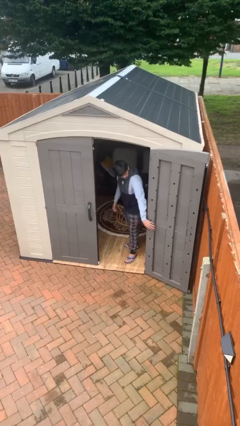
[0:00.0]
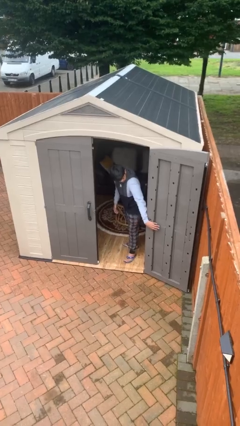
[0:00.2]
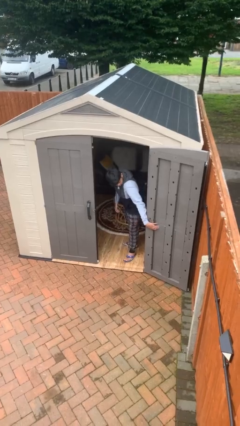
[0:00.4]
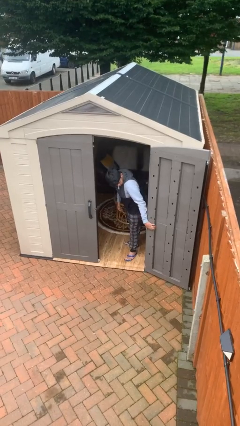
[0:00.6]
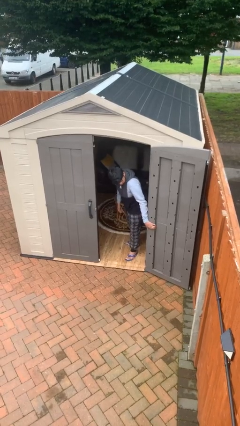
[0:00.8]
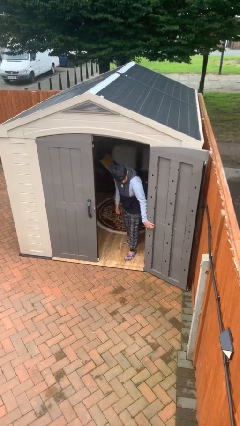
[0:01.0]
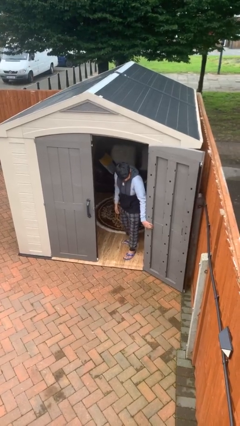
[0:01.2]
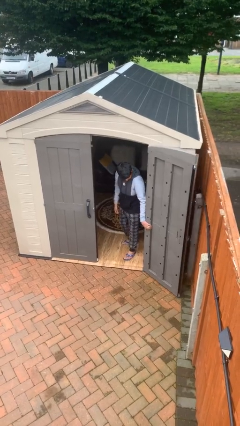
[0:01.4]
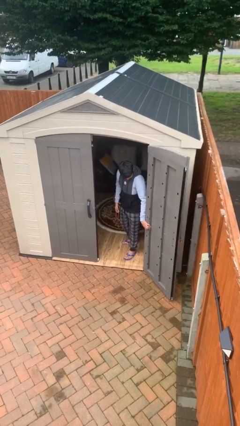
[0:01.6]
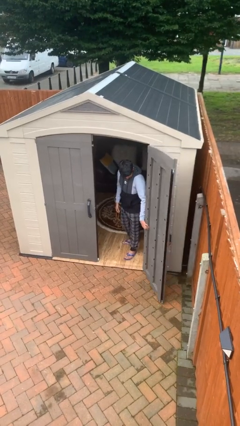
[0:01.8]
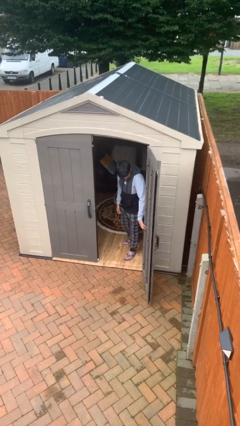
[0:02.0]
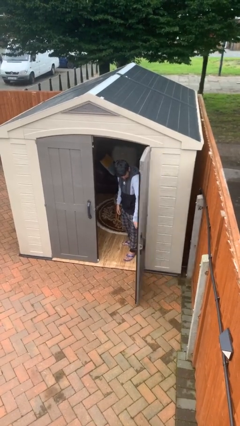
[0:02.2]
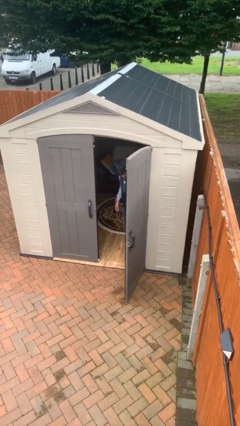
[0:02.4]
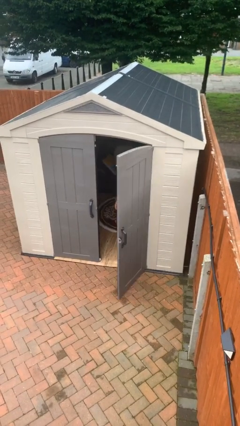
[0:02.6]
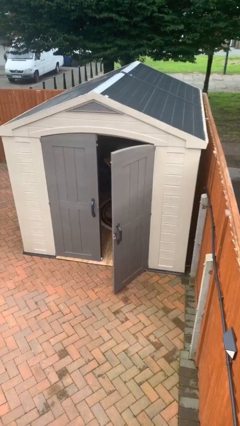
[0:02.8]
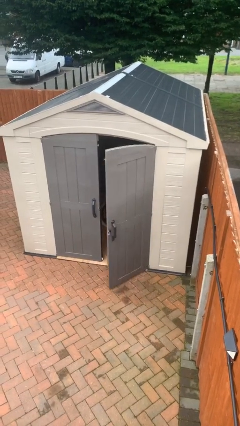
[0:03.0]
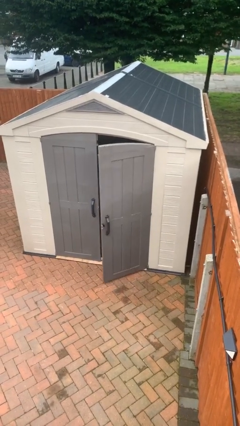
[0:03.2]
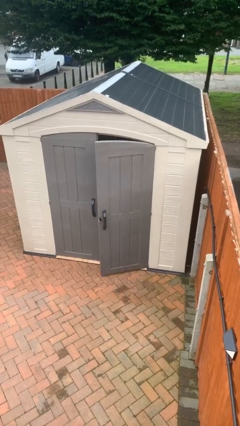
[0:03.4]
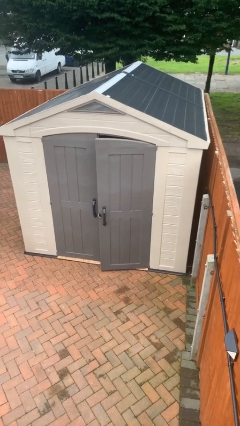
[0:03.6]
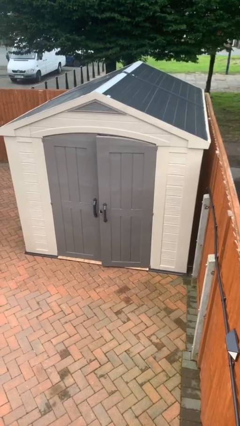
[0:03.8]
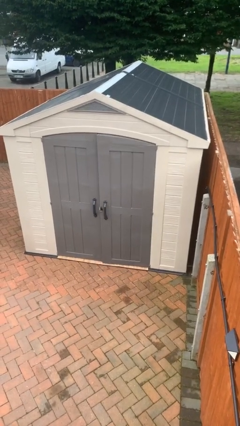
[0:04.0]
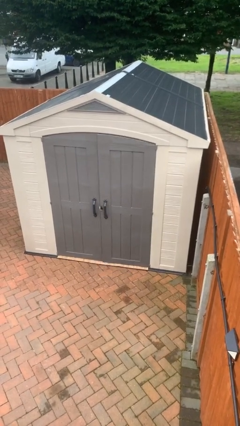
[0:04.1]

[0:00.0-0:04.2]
person closes facility door

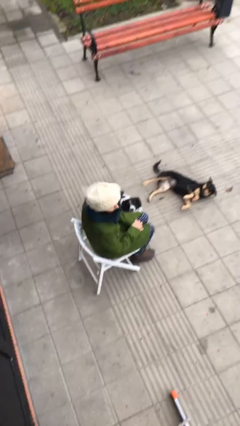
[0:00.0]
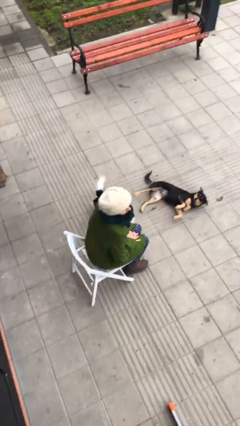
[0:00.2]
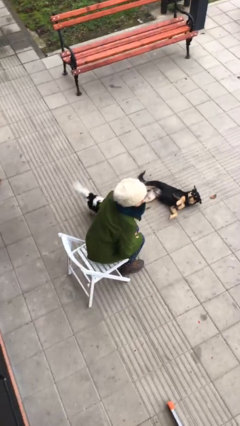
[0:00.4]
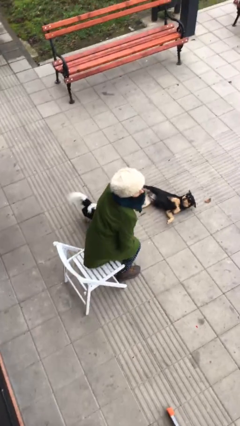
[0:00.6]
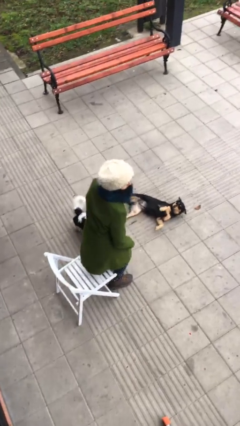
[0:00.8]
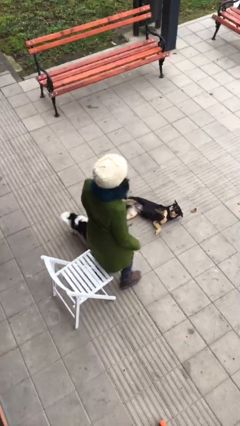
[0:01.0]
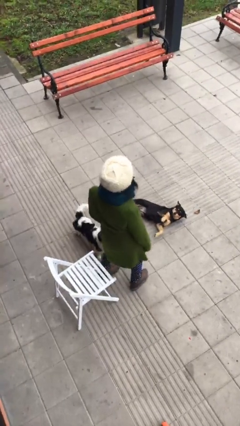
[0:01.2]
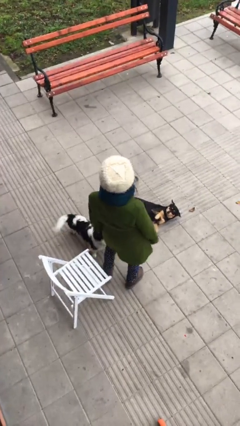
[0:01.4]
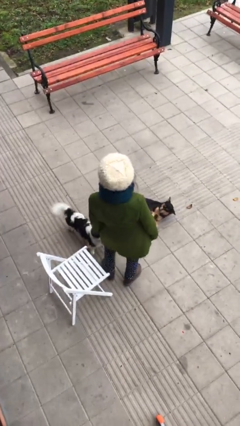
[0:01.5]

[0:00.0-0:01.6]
person stands up

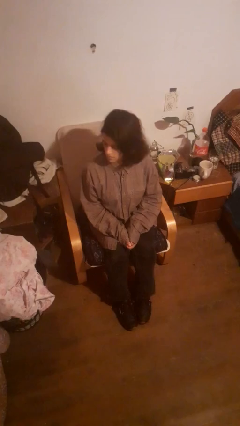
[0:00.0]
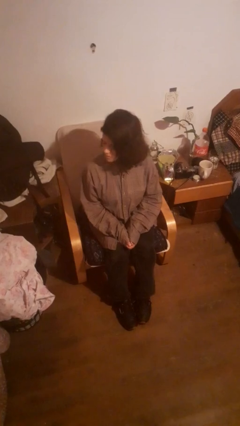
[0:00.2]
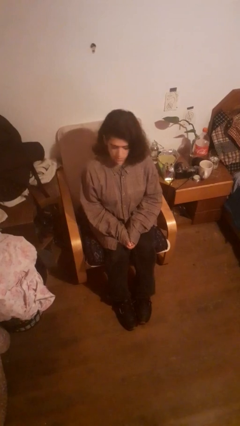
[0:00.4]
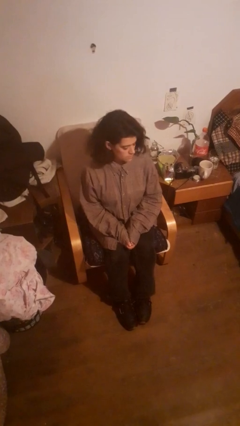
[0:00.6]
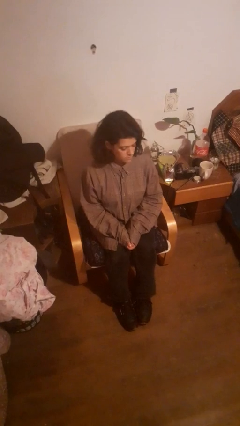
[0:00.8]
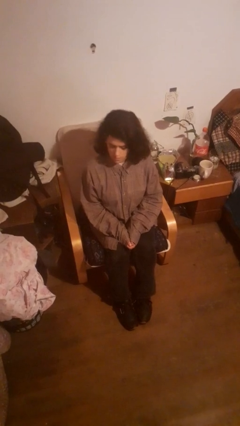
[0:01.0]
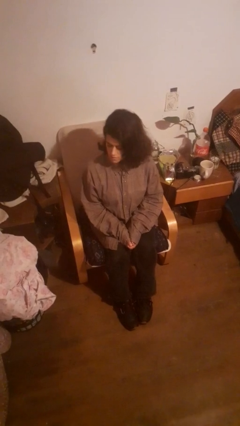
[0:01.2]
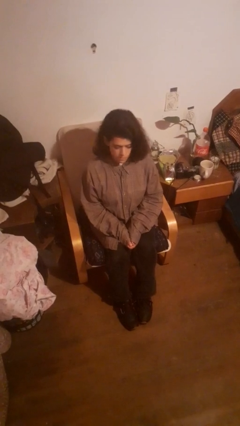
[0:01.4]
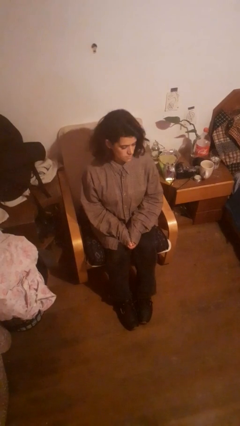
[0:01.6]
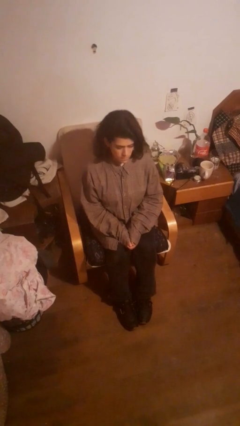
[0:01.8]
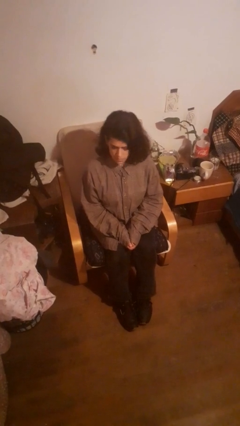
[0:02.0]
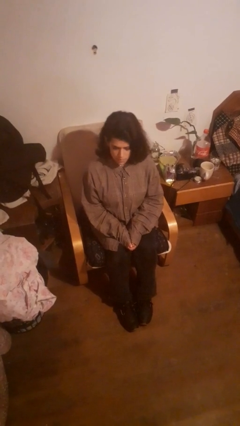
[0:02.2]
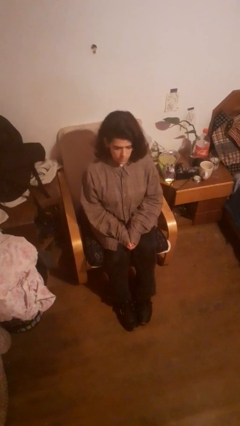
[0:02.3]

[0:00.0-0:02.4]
person shakes head

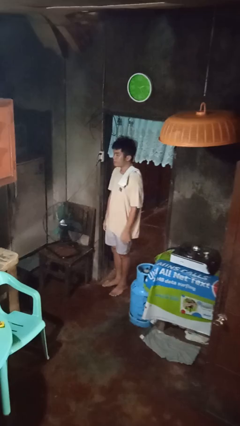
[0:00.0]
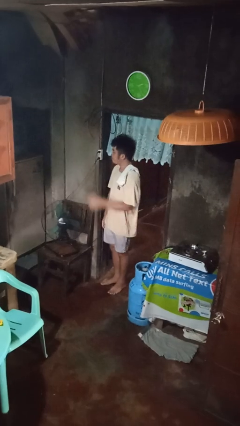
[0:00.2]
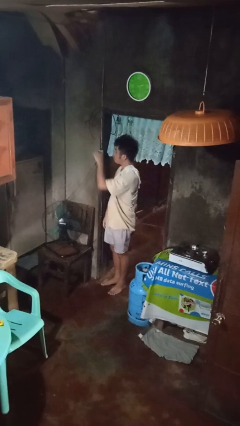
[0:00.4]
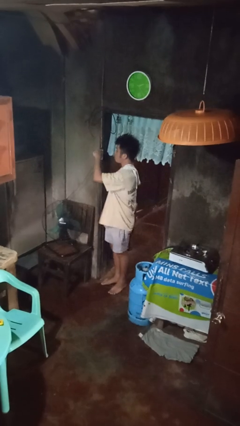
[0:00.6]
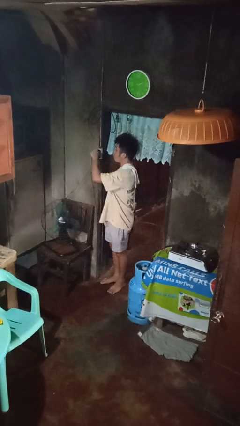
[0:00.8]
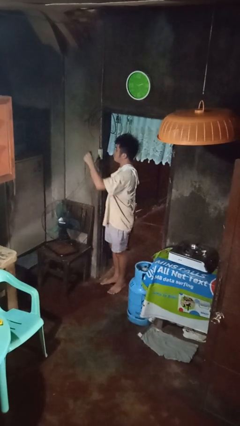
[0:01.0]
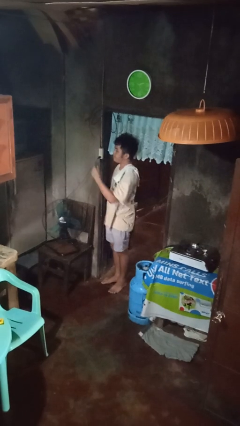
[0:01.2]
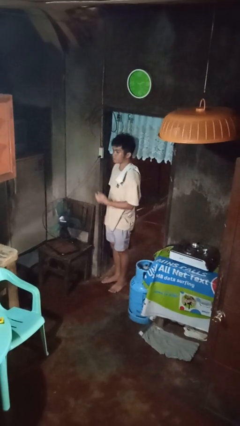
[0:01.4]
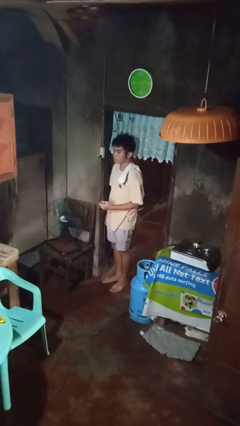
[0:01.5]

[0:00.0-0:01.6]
person unplugs from electrical socket

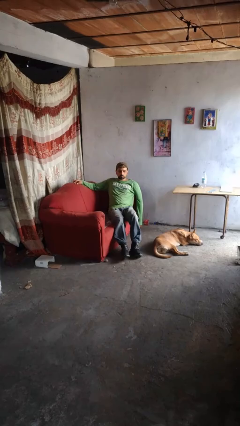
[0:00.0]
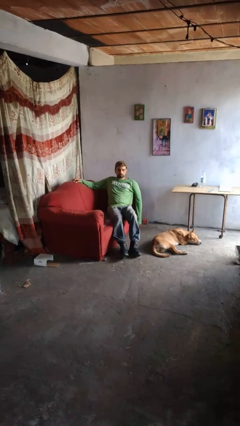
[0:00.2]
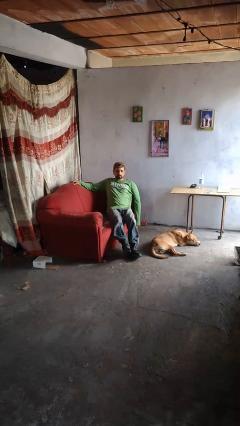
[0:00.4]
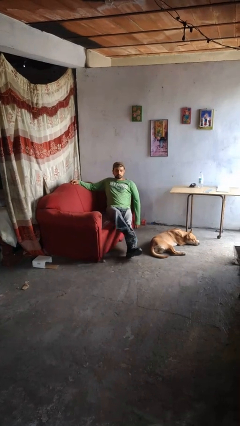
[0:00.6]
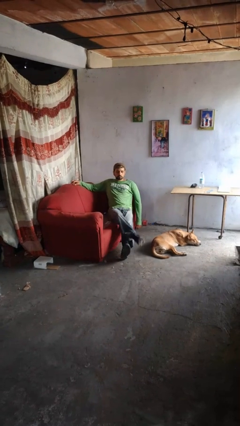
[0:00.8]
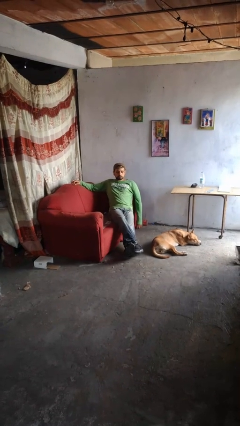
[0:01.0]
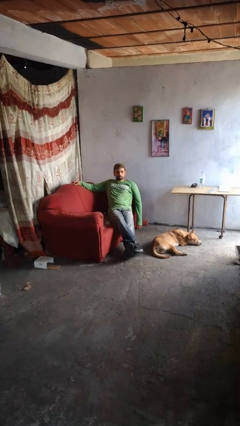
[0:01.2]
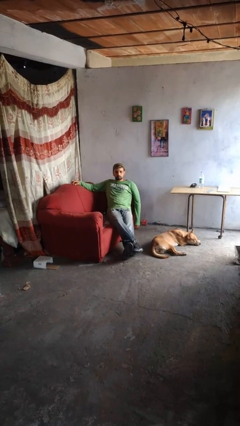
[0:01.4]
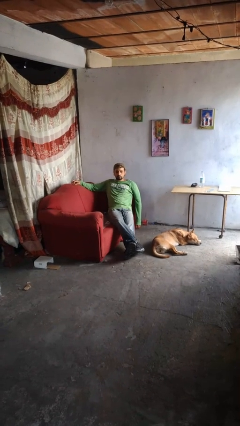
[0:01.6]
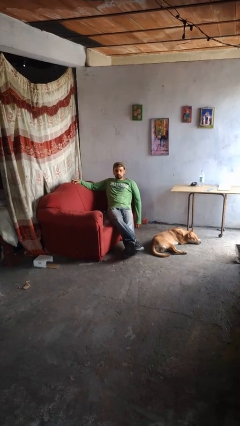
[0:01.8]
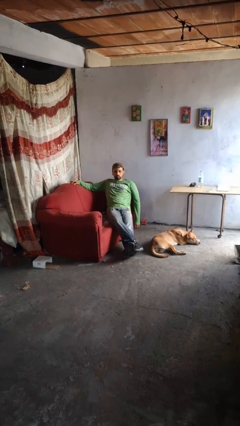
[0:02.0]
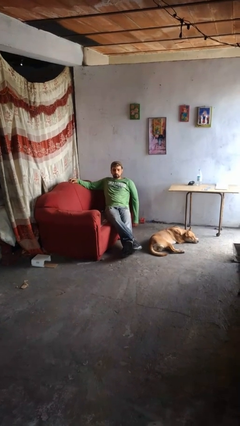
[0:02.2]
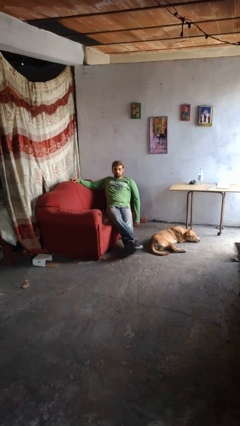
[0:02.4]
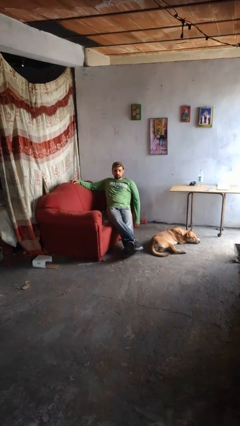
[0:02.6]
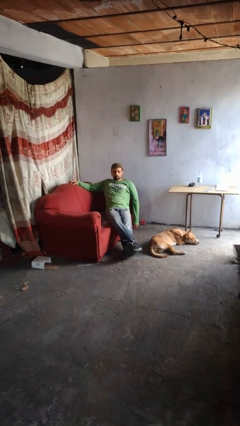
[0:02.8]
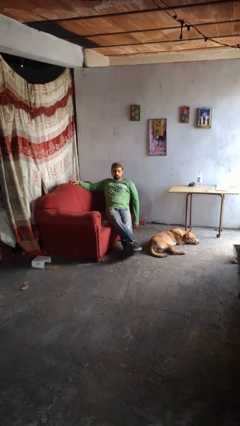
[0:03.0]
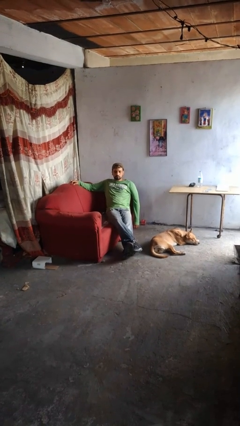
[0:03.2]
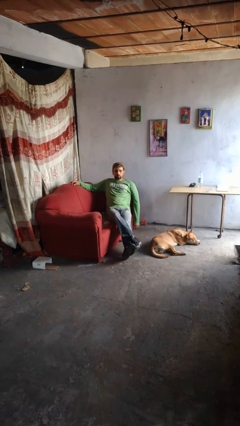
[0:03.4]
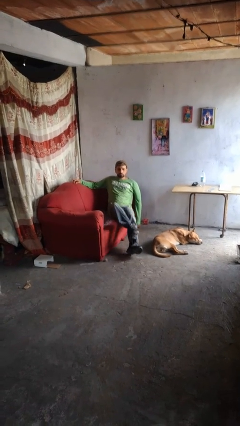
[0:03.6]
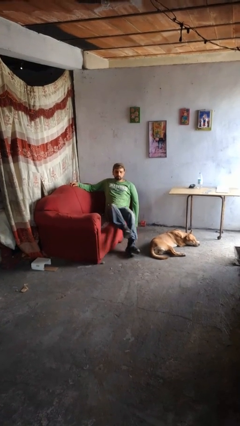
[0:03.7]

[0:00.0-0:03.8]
person crosses legs

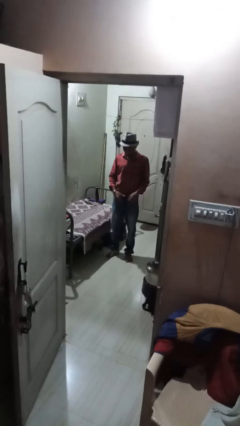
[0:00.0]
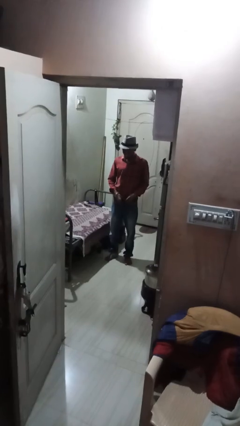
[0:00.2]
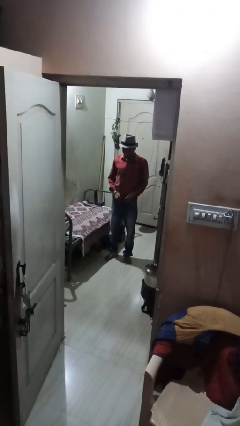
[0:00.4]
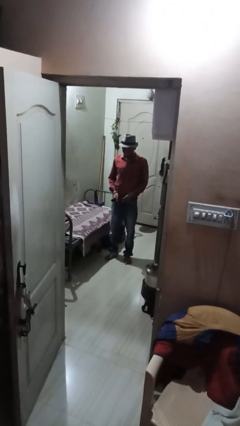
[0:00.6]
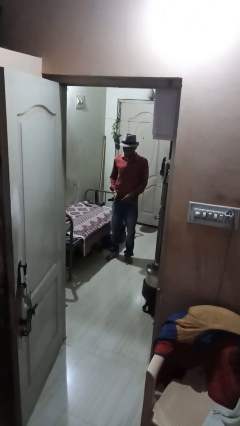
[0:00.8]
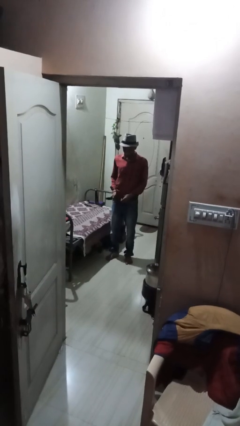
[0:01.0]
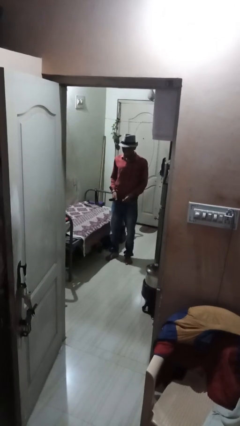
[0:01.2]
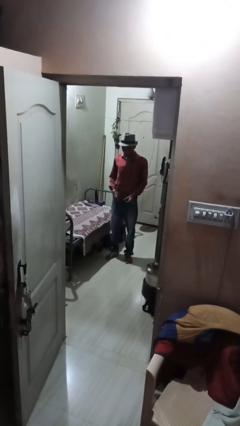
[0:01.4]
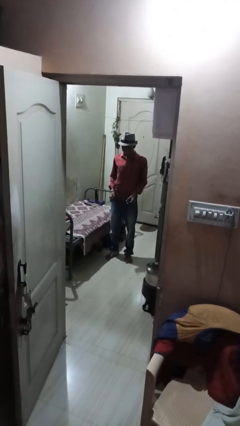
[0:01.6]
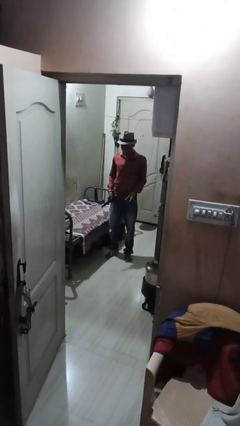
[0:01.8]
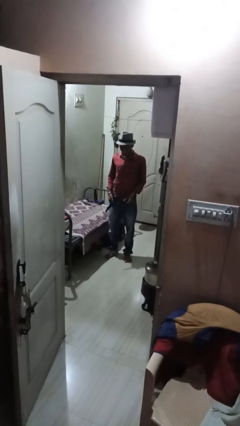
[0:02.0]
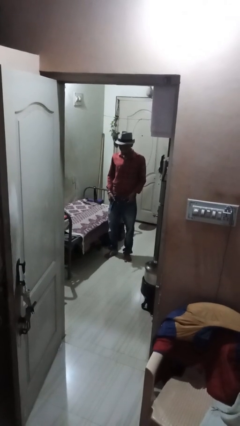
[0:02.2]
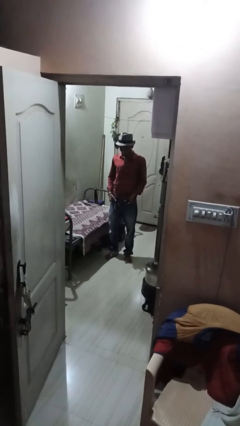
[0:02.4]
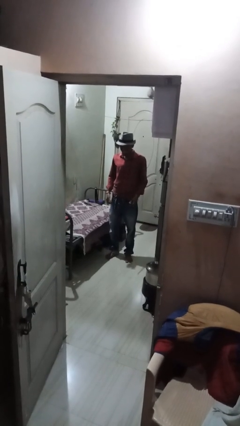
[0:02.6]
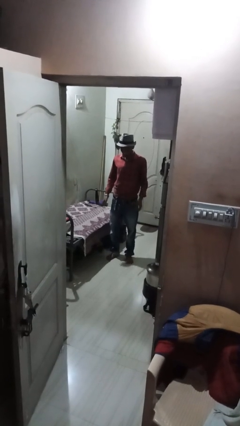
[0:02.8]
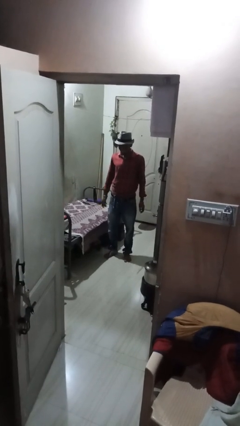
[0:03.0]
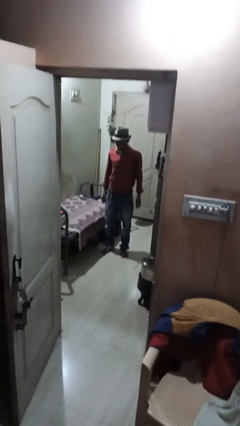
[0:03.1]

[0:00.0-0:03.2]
person takes off belt

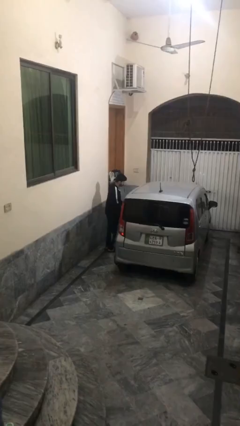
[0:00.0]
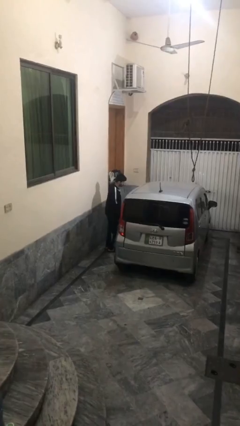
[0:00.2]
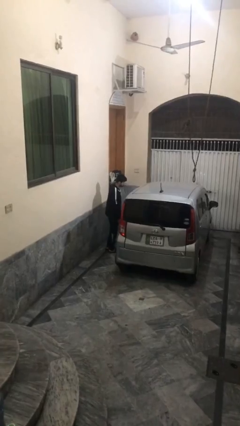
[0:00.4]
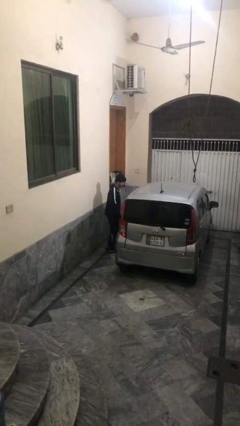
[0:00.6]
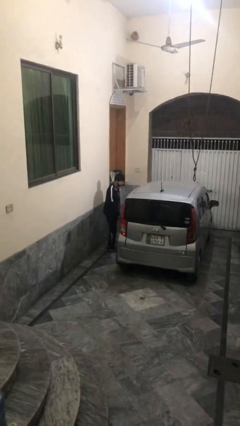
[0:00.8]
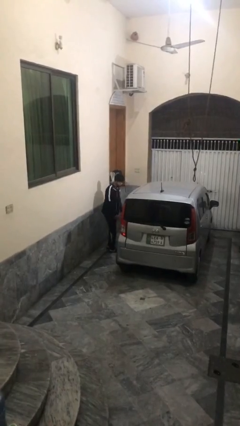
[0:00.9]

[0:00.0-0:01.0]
person closes car door
